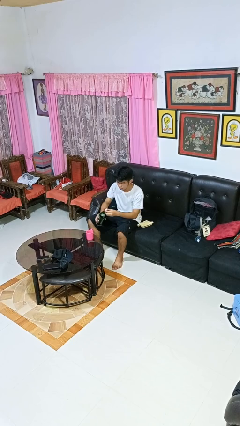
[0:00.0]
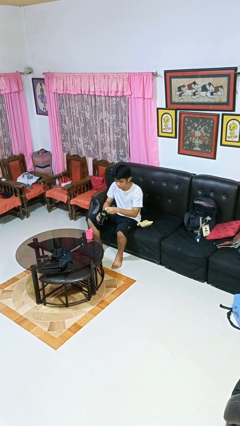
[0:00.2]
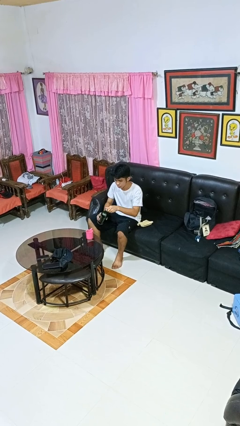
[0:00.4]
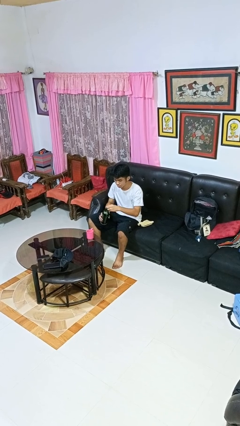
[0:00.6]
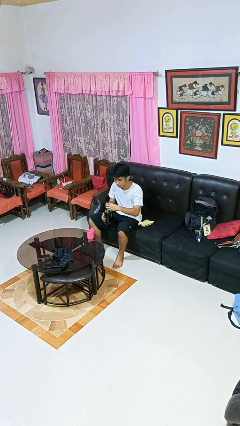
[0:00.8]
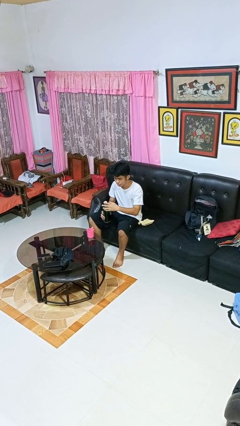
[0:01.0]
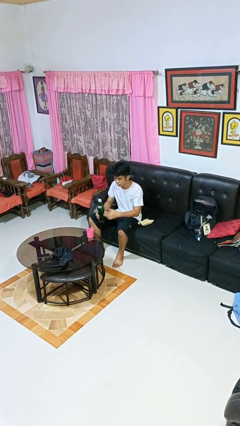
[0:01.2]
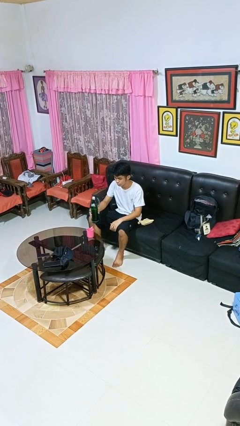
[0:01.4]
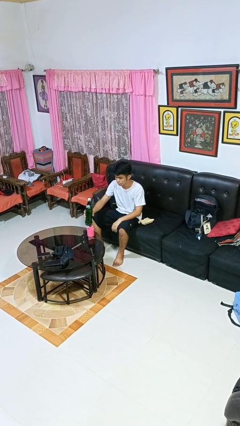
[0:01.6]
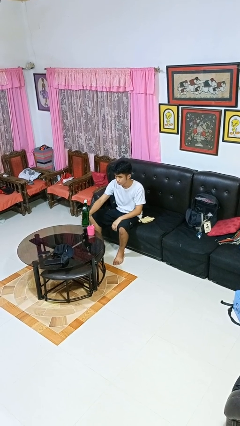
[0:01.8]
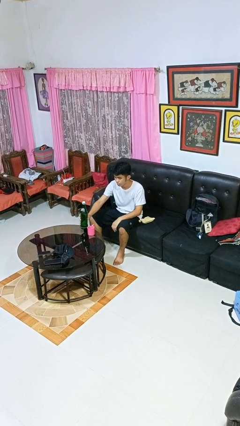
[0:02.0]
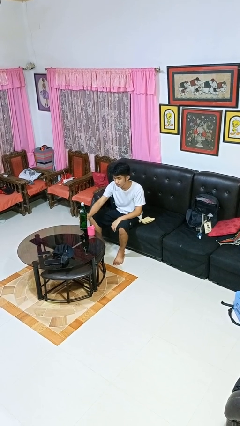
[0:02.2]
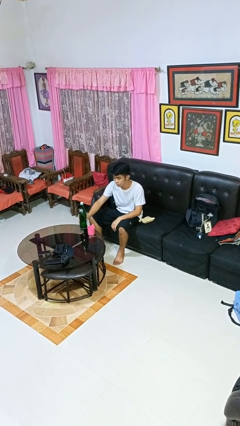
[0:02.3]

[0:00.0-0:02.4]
person screws lid to bottle

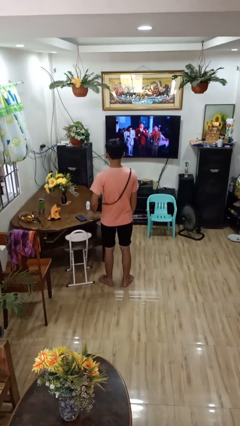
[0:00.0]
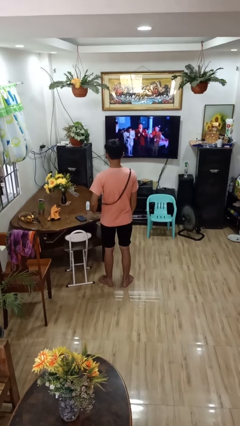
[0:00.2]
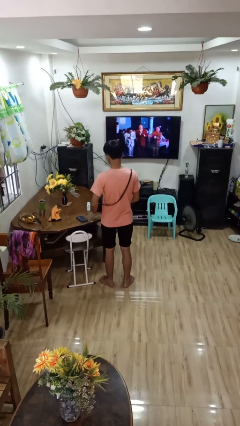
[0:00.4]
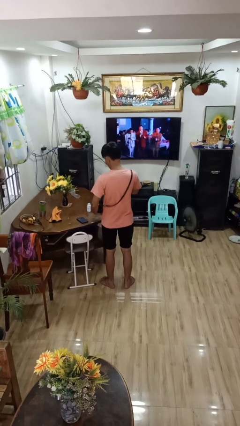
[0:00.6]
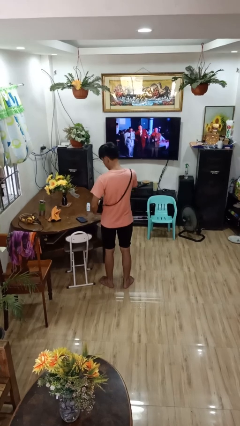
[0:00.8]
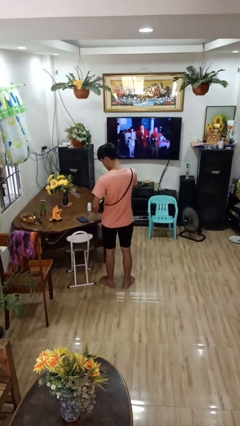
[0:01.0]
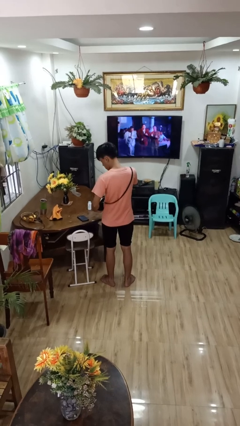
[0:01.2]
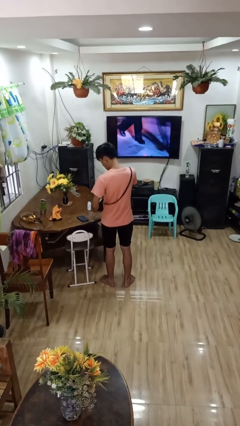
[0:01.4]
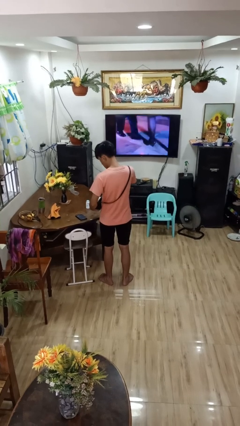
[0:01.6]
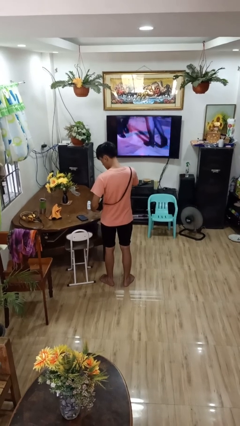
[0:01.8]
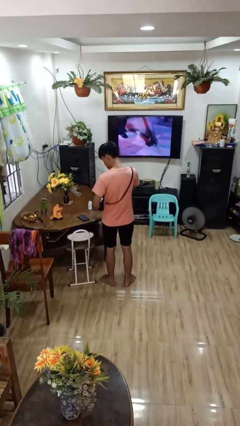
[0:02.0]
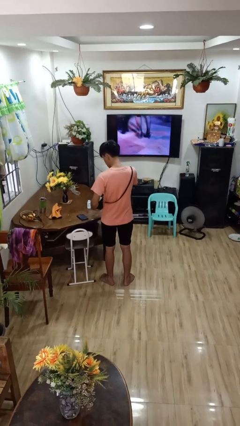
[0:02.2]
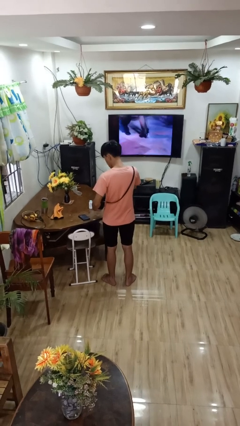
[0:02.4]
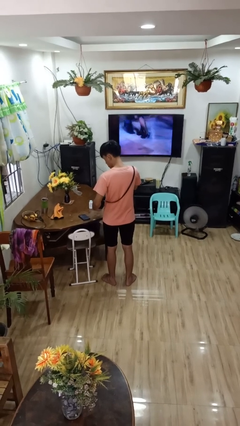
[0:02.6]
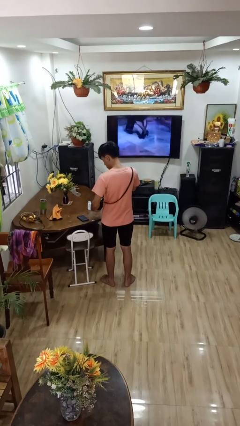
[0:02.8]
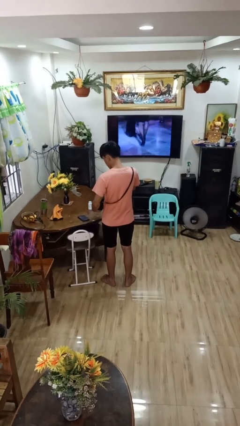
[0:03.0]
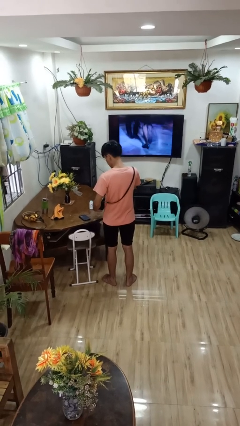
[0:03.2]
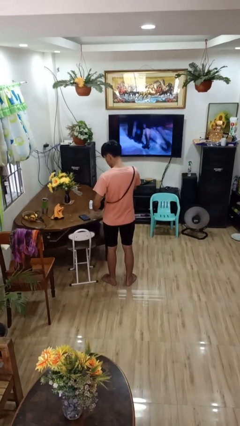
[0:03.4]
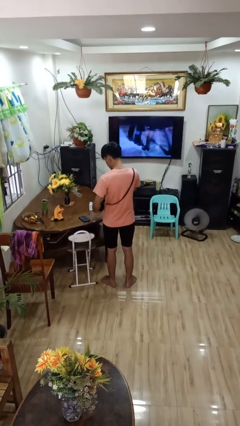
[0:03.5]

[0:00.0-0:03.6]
person searches in purse

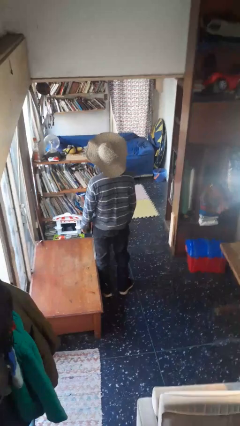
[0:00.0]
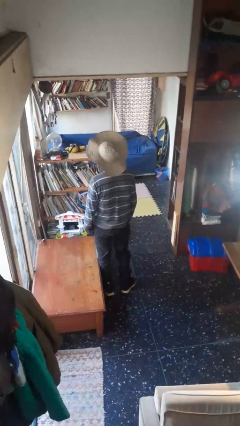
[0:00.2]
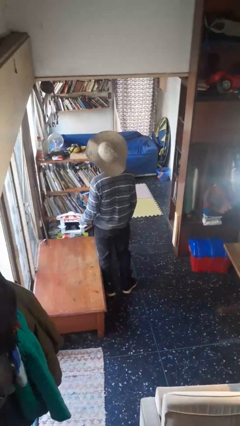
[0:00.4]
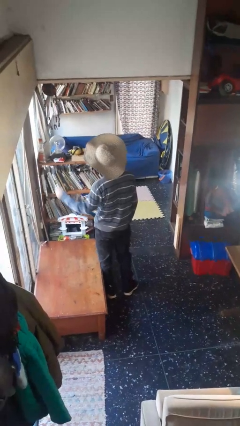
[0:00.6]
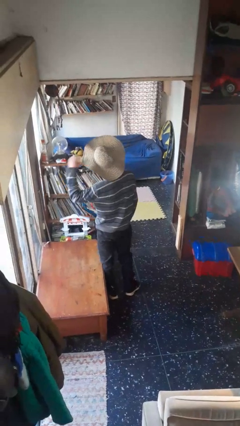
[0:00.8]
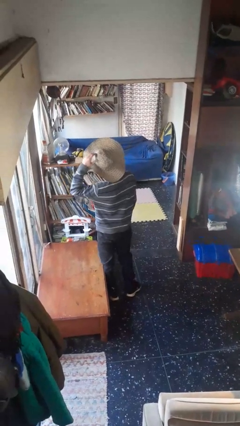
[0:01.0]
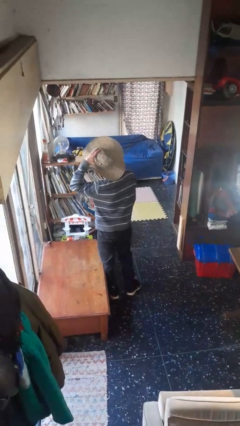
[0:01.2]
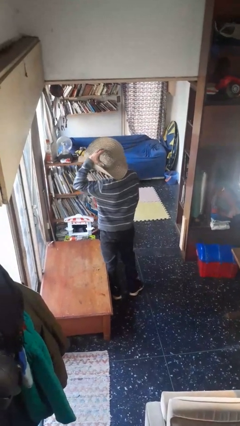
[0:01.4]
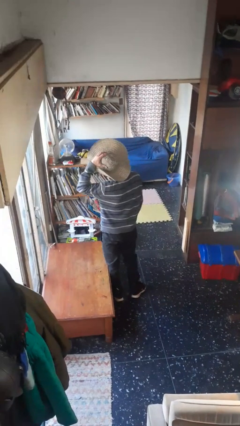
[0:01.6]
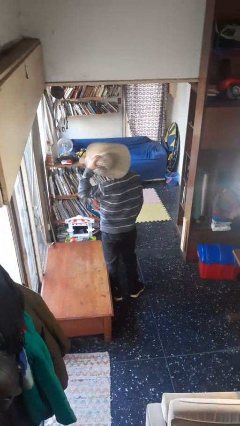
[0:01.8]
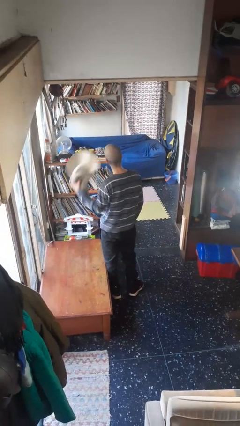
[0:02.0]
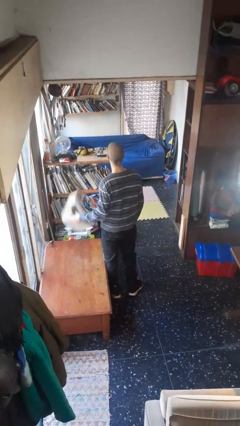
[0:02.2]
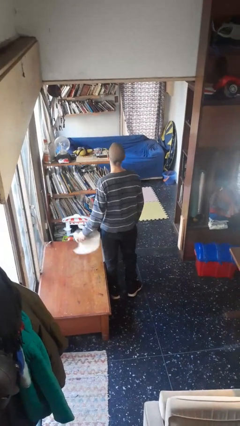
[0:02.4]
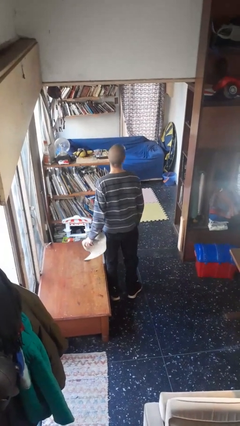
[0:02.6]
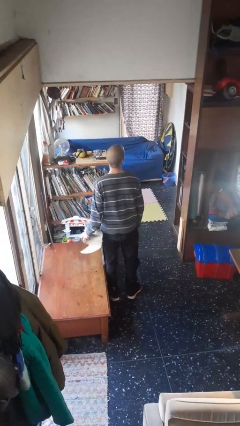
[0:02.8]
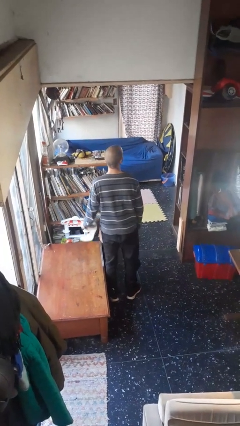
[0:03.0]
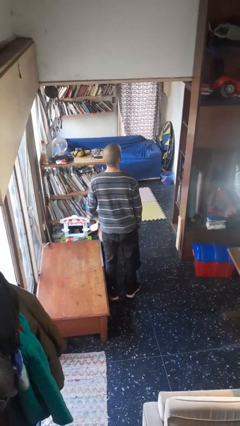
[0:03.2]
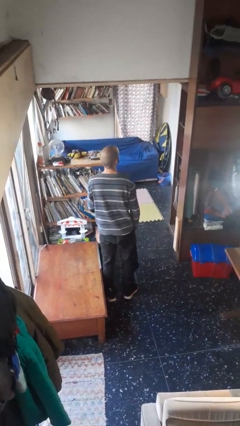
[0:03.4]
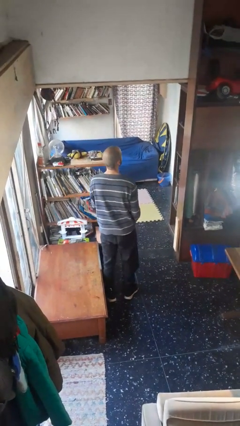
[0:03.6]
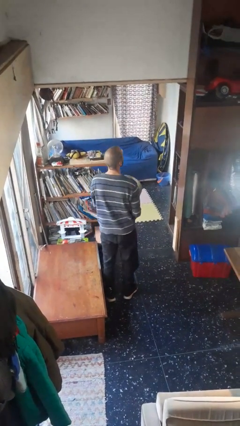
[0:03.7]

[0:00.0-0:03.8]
person takes off hat

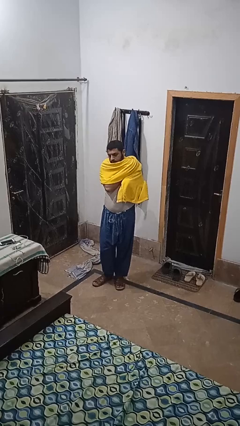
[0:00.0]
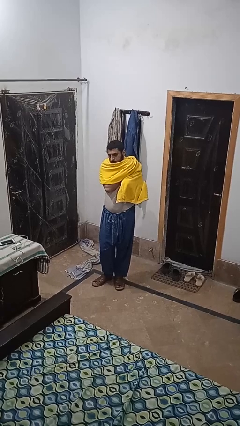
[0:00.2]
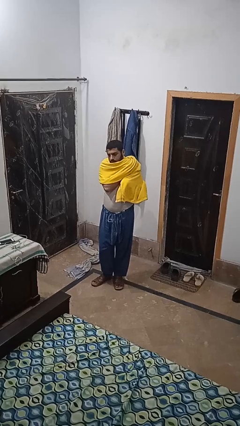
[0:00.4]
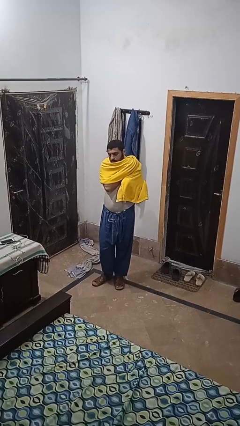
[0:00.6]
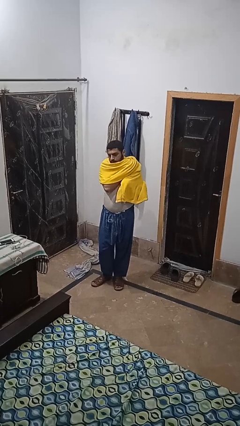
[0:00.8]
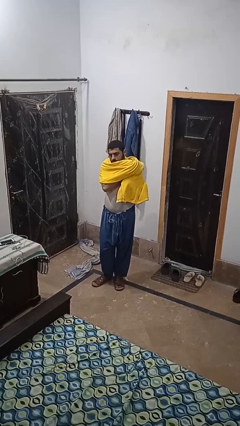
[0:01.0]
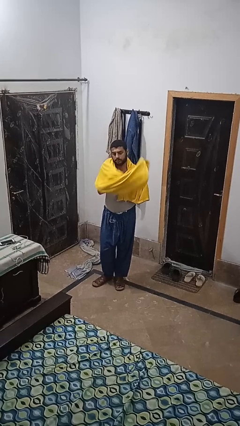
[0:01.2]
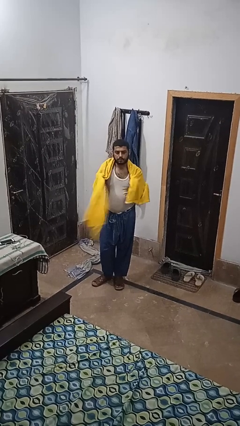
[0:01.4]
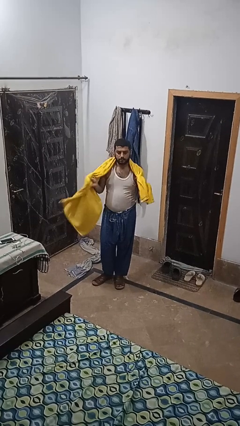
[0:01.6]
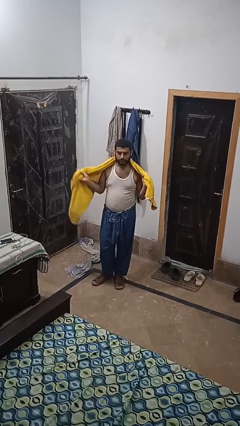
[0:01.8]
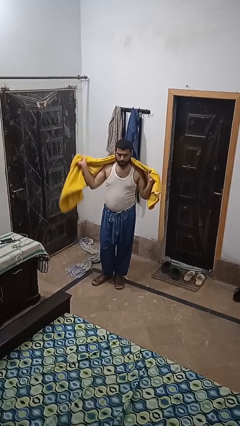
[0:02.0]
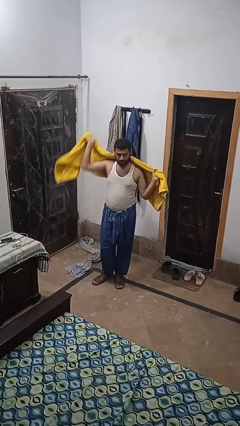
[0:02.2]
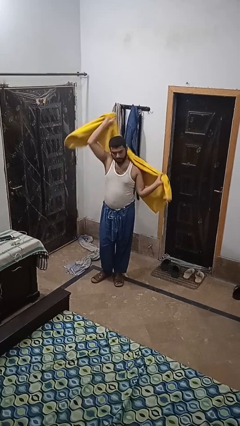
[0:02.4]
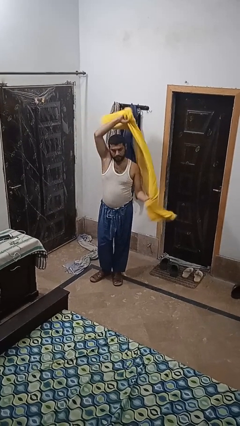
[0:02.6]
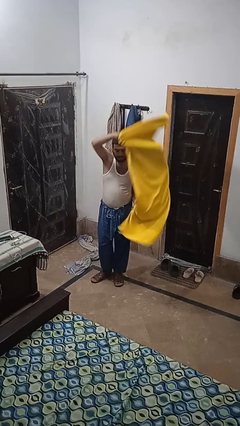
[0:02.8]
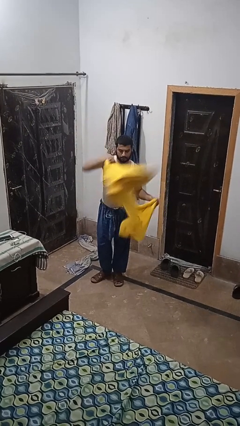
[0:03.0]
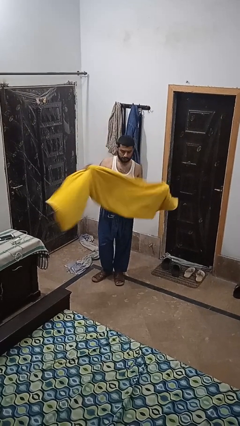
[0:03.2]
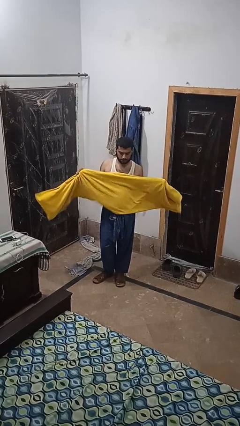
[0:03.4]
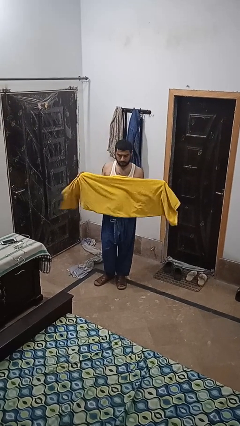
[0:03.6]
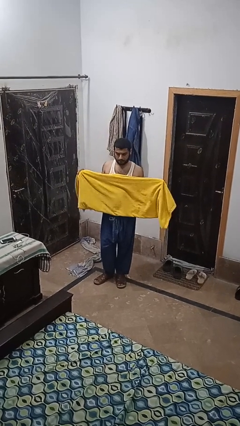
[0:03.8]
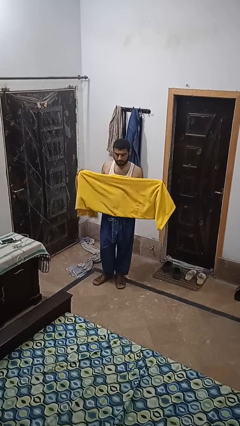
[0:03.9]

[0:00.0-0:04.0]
person takes off scarf

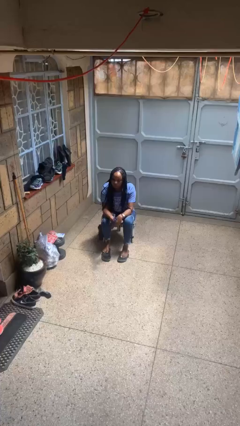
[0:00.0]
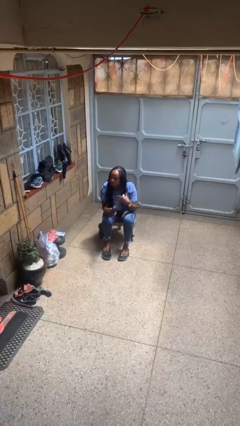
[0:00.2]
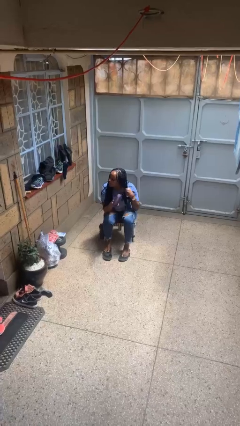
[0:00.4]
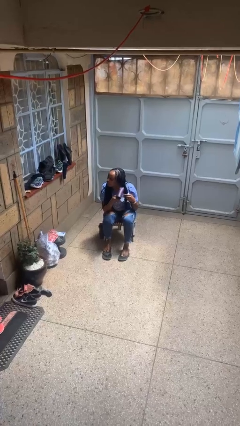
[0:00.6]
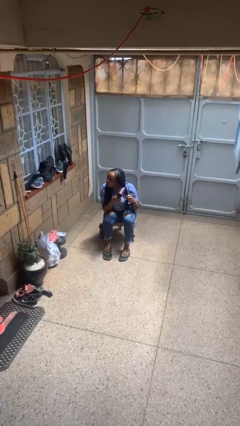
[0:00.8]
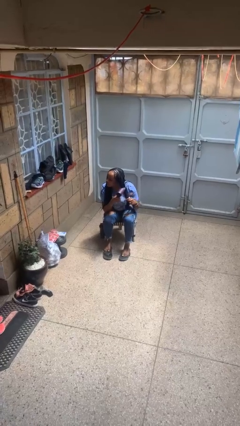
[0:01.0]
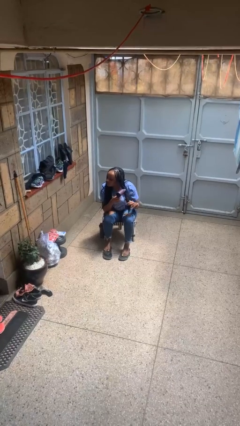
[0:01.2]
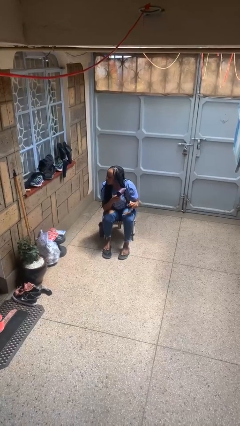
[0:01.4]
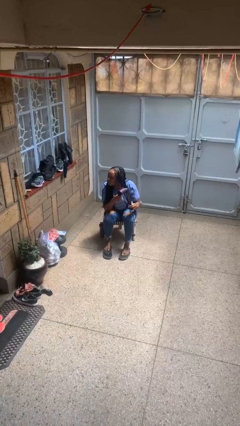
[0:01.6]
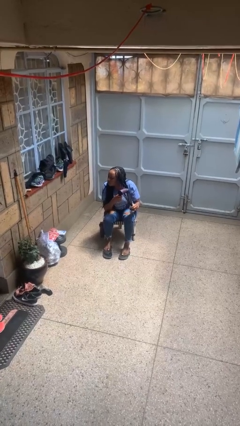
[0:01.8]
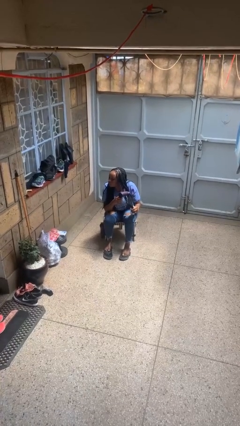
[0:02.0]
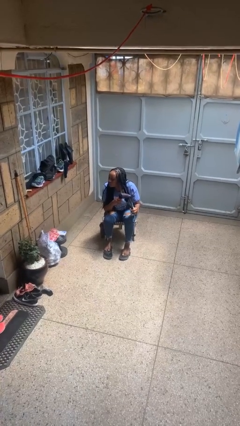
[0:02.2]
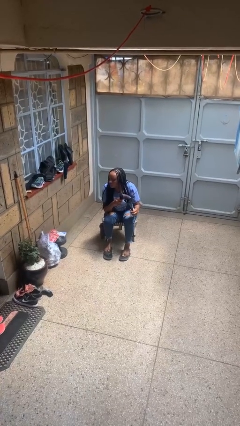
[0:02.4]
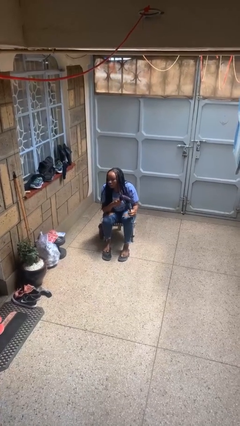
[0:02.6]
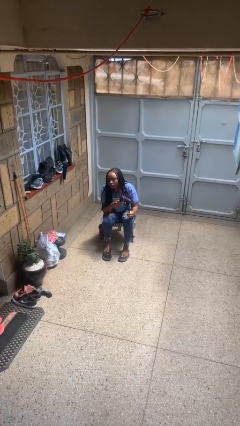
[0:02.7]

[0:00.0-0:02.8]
person dries hair with hairdryer

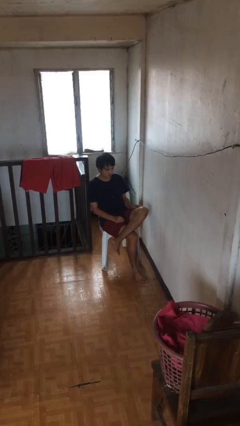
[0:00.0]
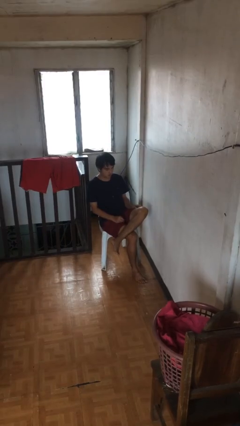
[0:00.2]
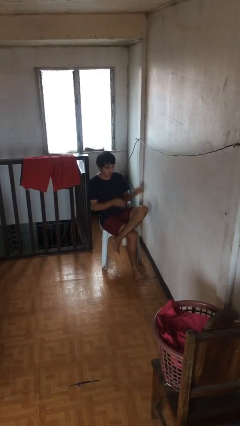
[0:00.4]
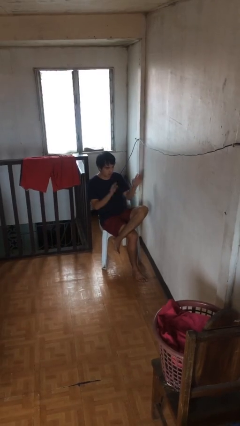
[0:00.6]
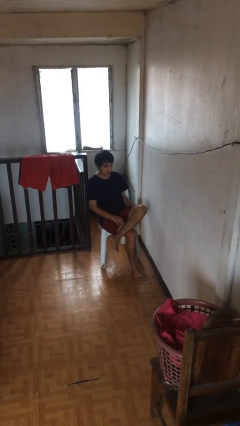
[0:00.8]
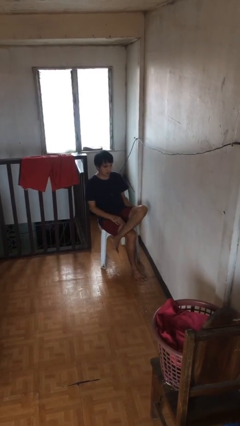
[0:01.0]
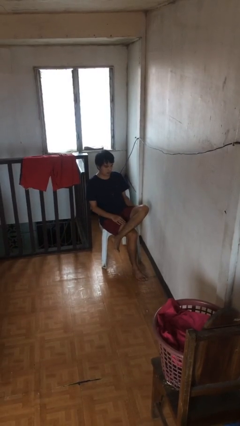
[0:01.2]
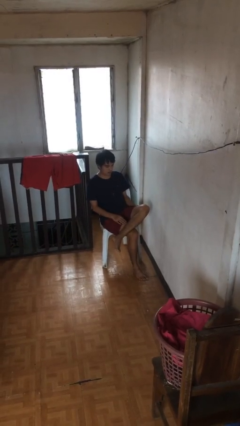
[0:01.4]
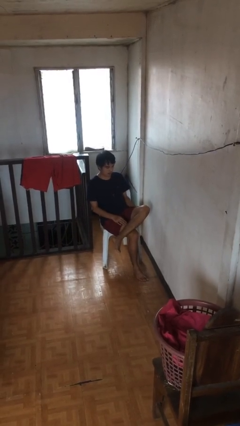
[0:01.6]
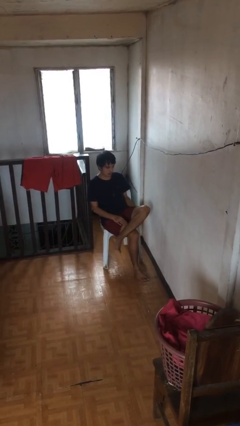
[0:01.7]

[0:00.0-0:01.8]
person slaps hands on thighs
